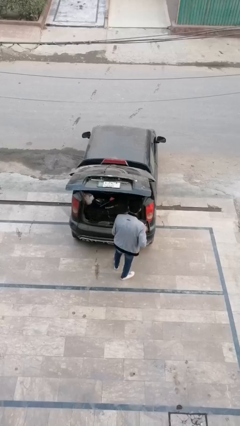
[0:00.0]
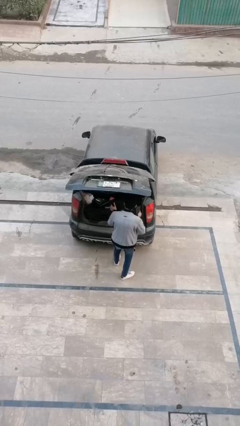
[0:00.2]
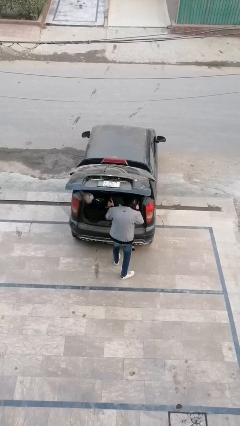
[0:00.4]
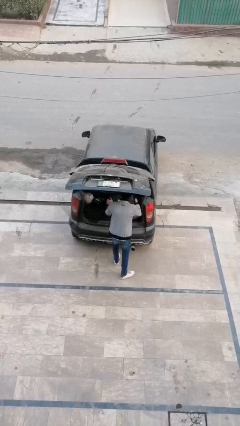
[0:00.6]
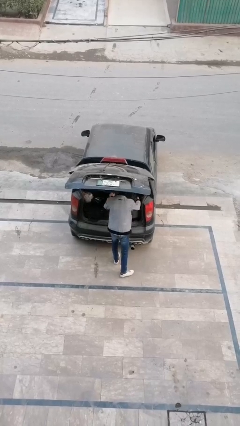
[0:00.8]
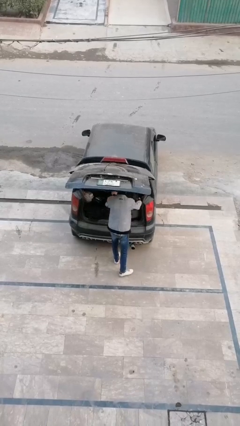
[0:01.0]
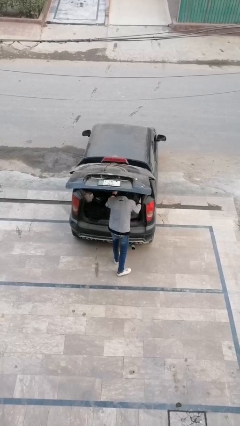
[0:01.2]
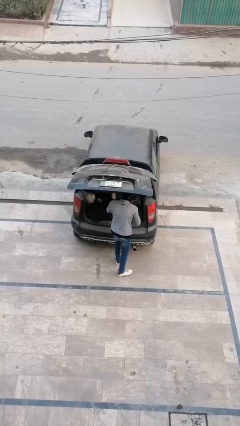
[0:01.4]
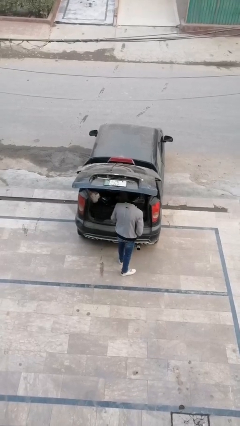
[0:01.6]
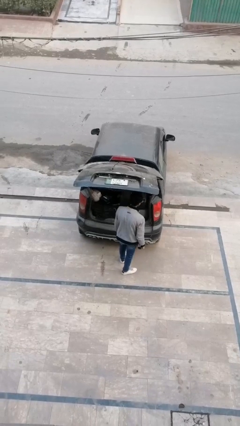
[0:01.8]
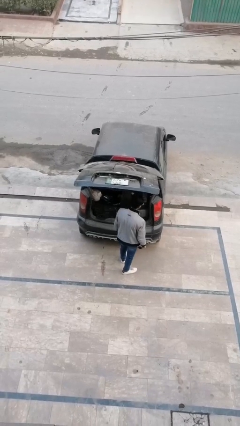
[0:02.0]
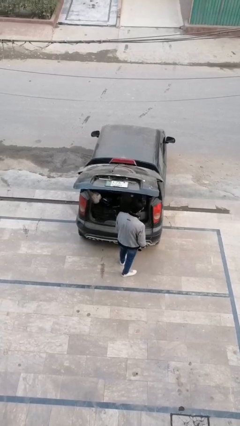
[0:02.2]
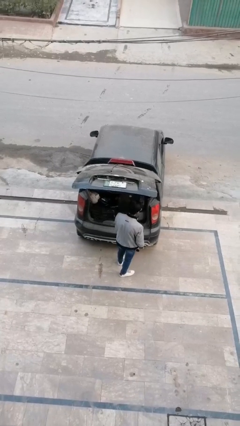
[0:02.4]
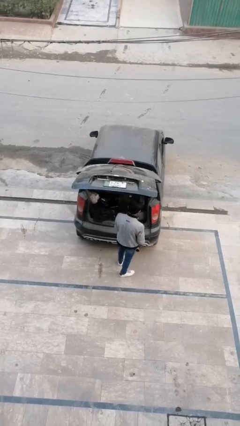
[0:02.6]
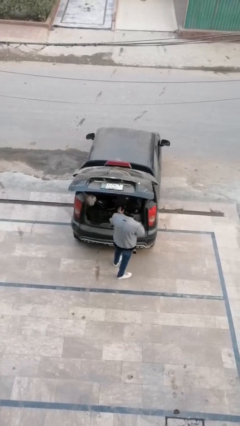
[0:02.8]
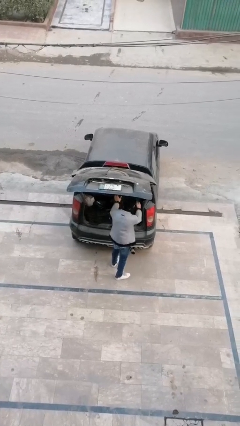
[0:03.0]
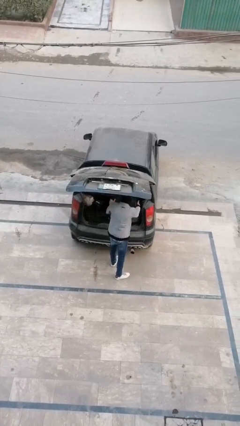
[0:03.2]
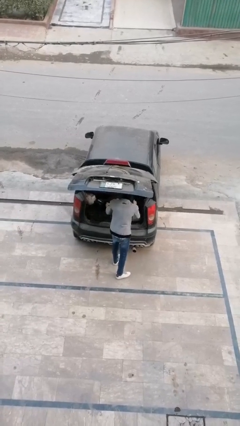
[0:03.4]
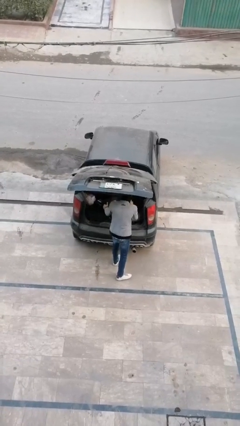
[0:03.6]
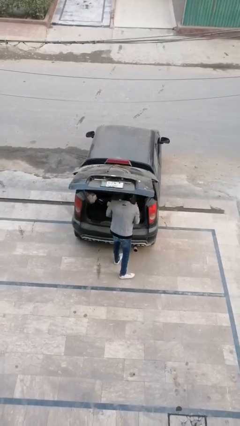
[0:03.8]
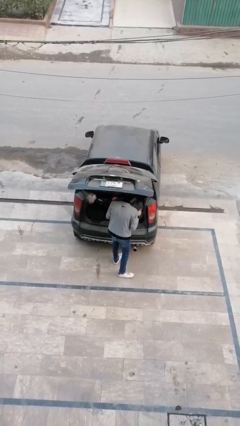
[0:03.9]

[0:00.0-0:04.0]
person loads car

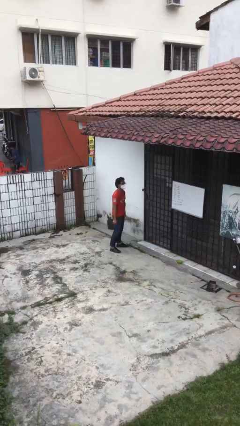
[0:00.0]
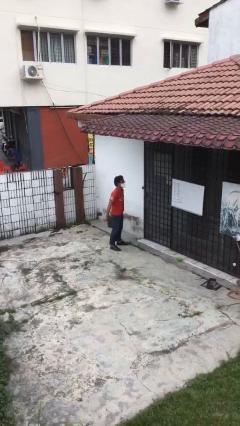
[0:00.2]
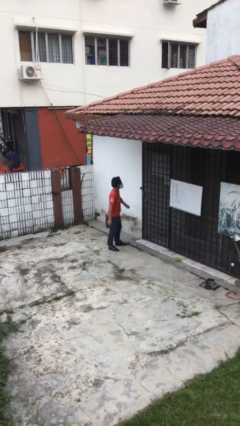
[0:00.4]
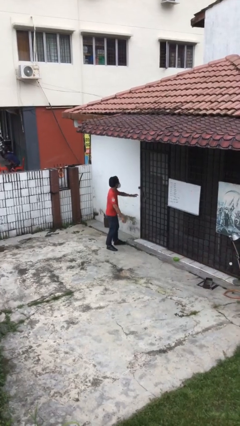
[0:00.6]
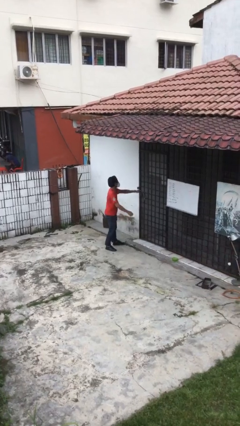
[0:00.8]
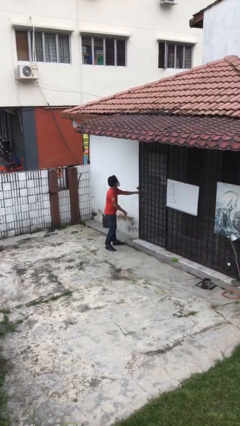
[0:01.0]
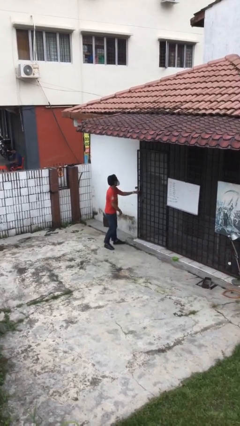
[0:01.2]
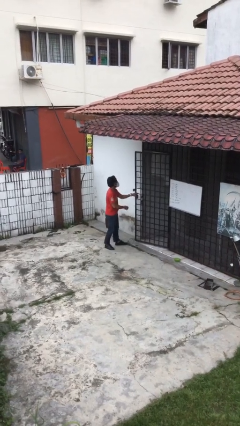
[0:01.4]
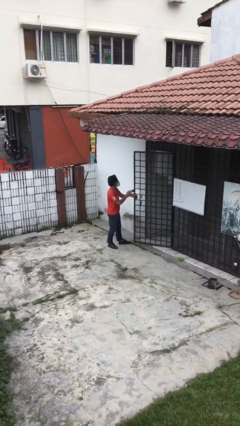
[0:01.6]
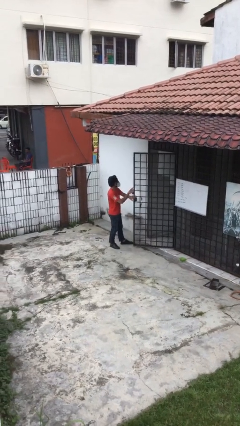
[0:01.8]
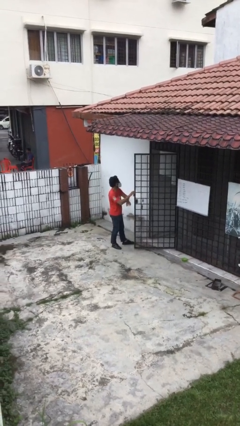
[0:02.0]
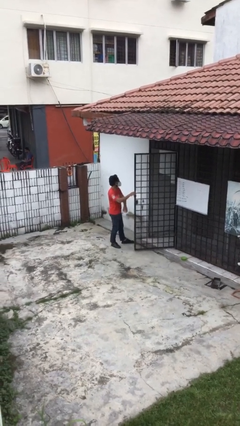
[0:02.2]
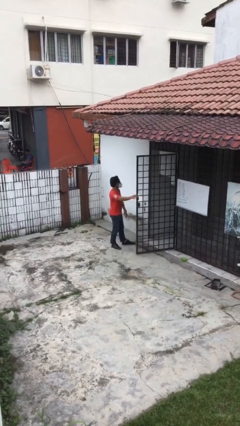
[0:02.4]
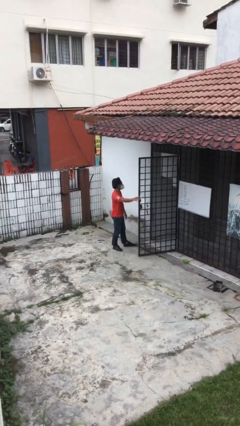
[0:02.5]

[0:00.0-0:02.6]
person opens facility door

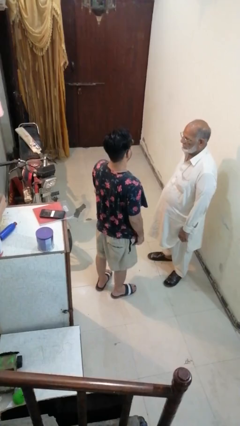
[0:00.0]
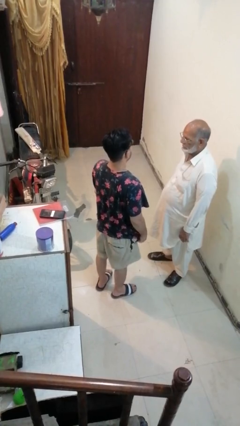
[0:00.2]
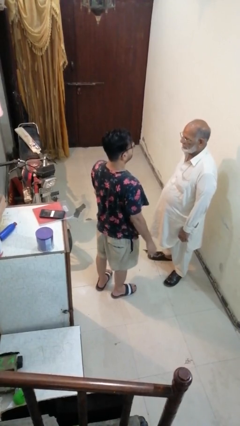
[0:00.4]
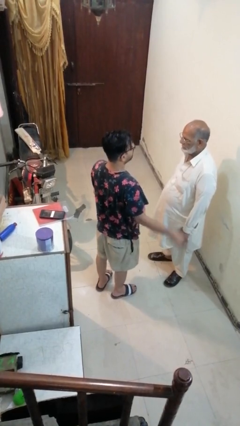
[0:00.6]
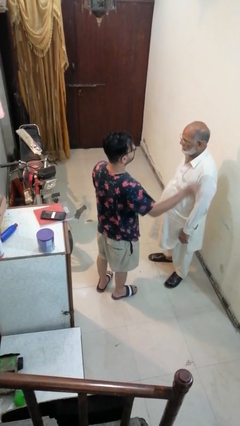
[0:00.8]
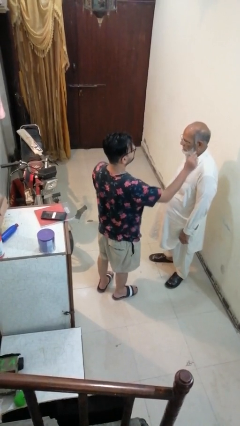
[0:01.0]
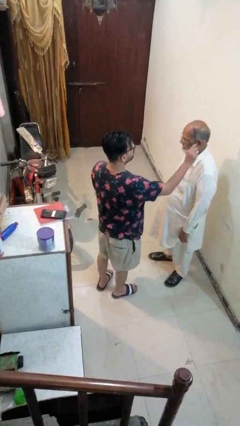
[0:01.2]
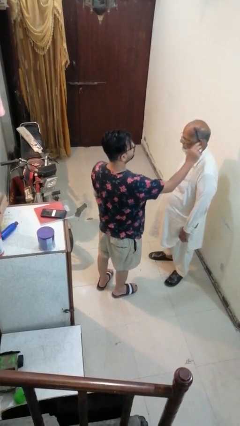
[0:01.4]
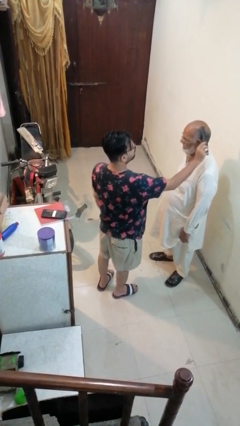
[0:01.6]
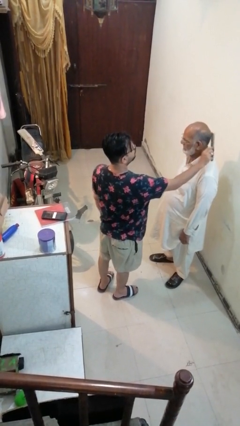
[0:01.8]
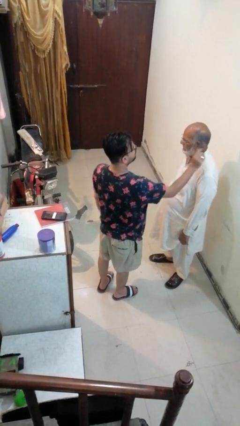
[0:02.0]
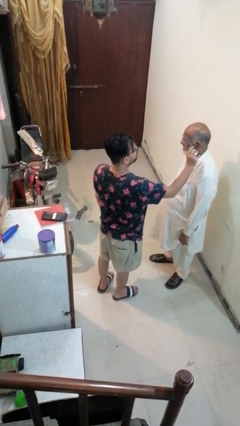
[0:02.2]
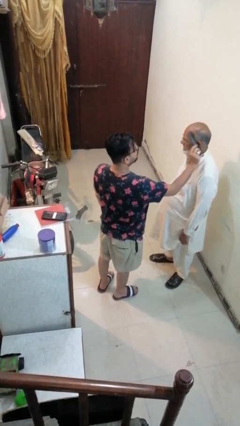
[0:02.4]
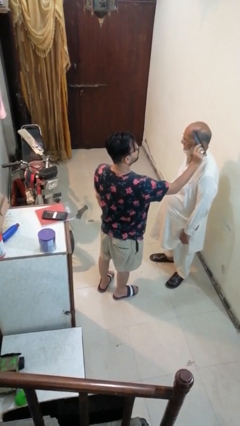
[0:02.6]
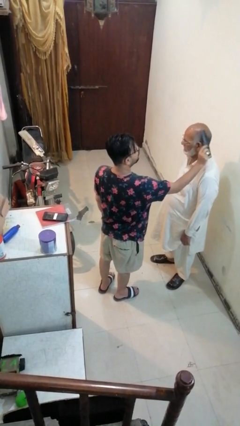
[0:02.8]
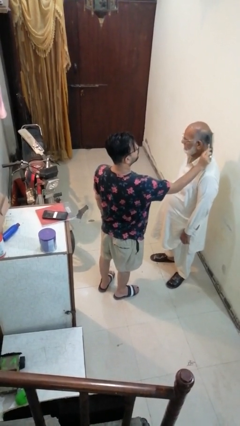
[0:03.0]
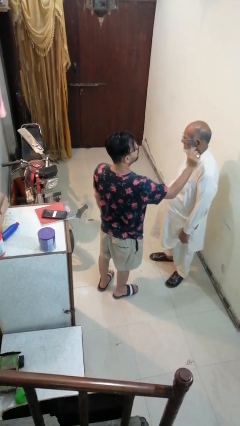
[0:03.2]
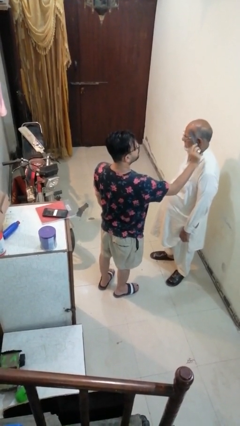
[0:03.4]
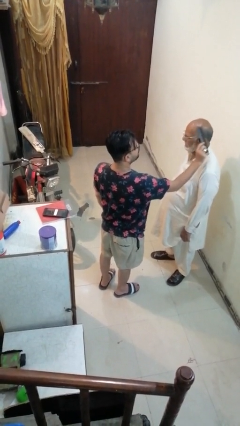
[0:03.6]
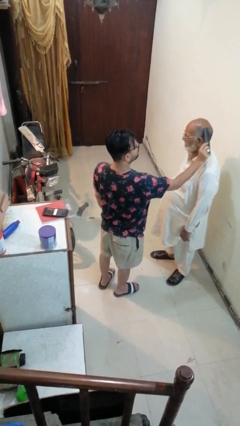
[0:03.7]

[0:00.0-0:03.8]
person brushes hair of person

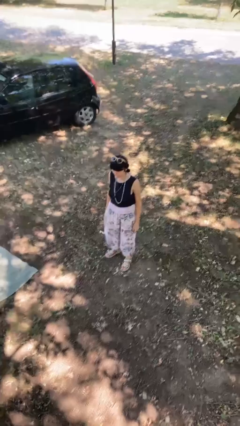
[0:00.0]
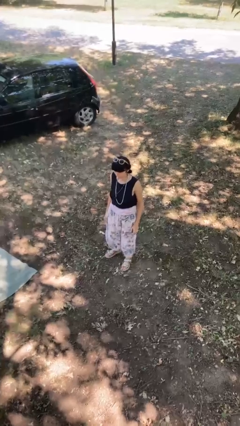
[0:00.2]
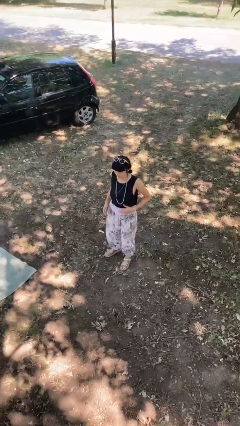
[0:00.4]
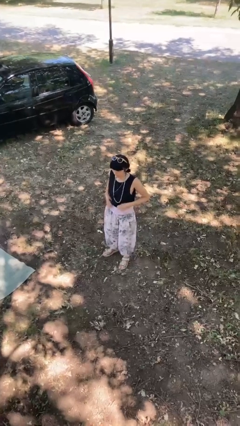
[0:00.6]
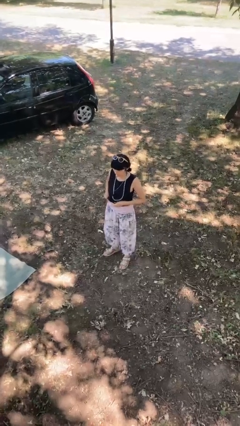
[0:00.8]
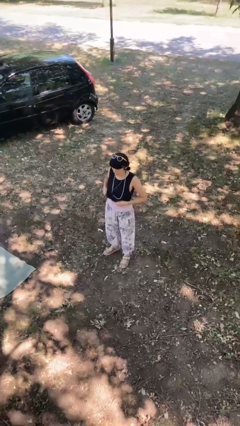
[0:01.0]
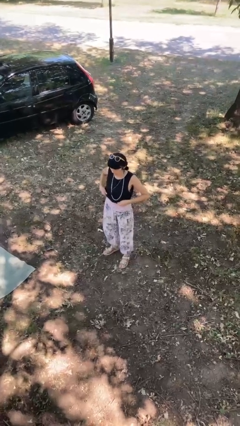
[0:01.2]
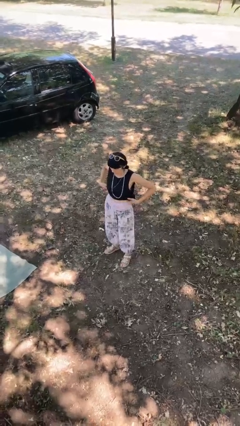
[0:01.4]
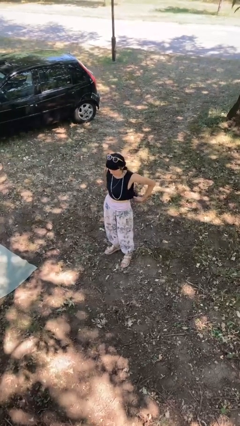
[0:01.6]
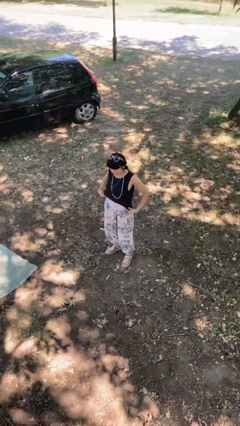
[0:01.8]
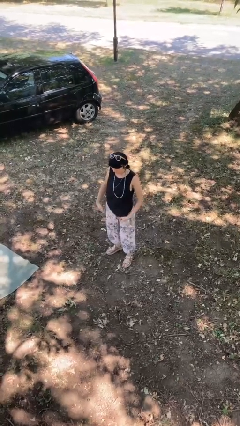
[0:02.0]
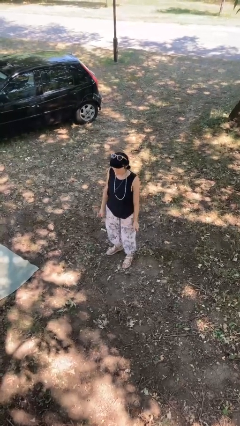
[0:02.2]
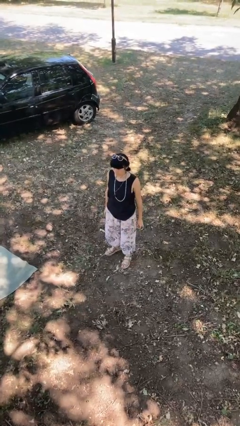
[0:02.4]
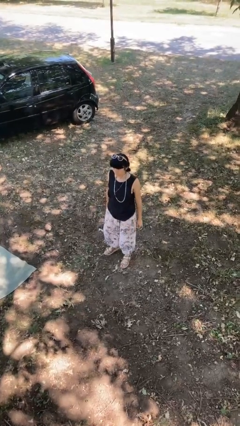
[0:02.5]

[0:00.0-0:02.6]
person untucks shirt

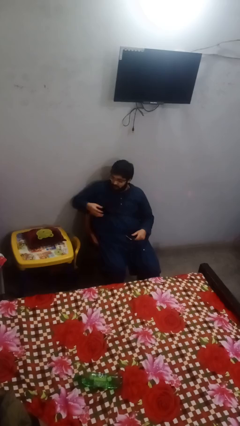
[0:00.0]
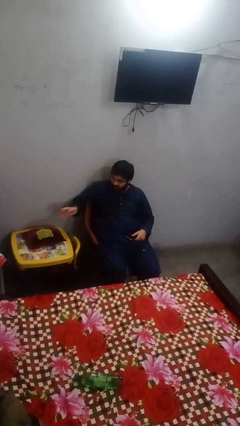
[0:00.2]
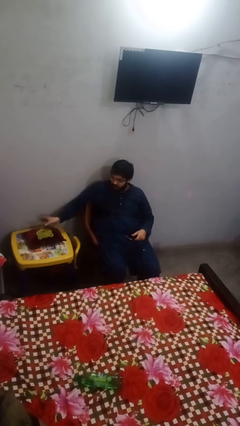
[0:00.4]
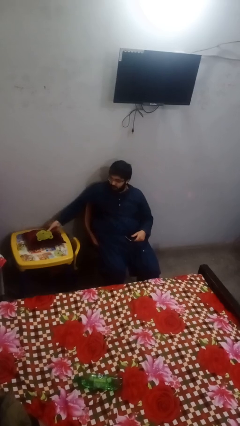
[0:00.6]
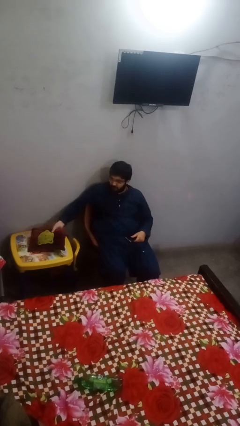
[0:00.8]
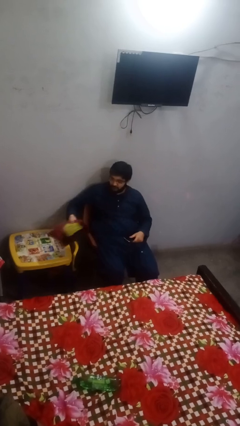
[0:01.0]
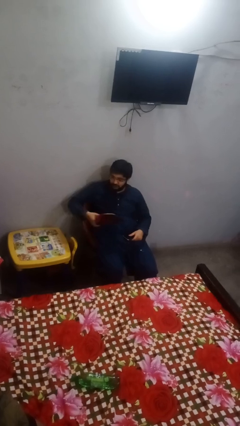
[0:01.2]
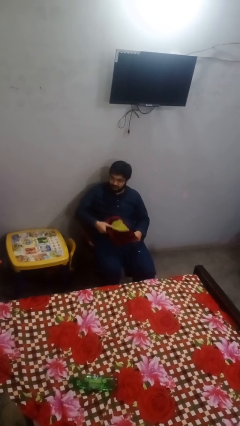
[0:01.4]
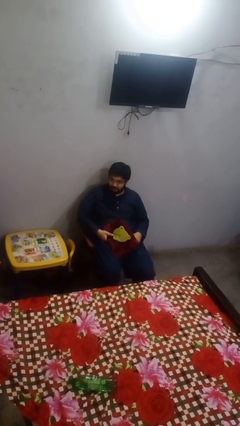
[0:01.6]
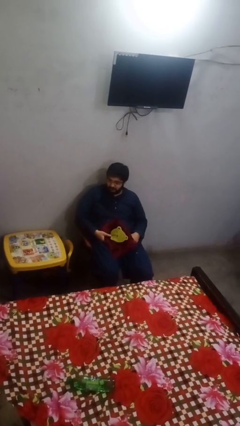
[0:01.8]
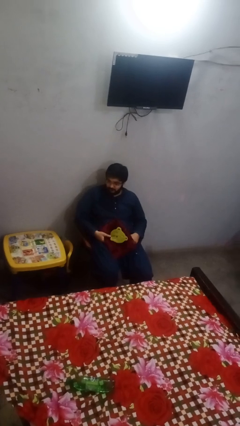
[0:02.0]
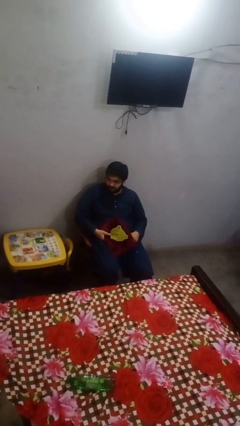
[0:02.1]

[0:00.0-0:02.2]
person picks up object from table

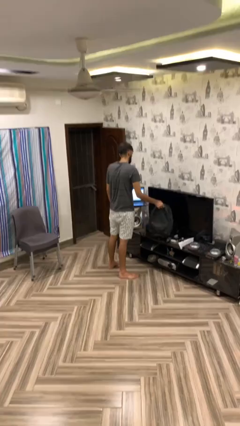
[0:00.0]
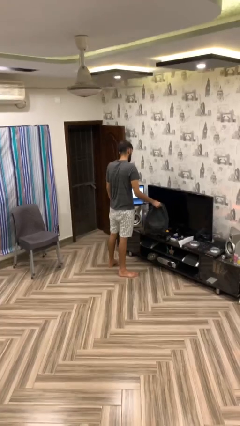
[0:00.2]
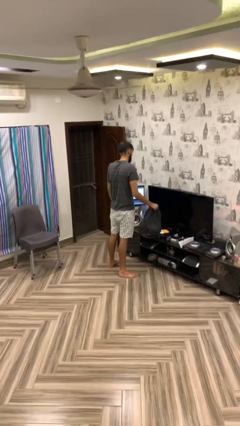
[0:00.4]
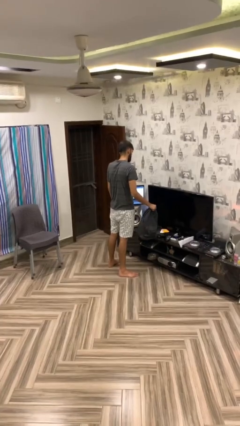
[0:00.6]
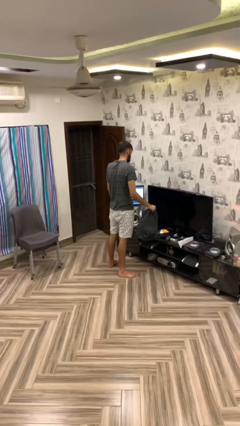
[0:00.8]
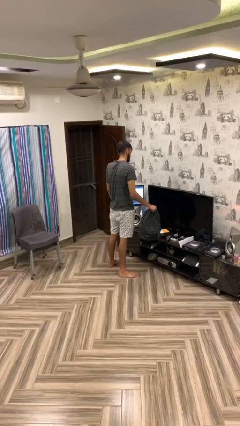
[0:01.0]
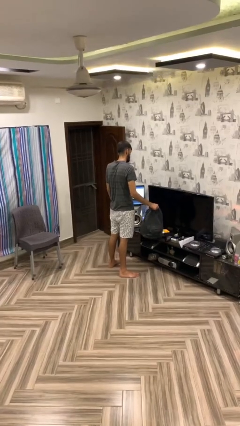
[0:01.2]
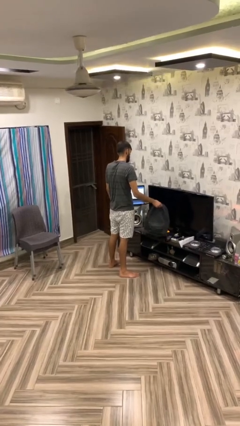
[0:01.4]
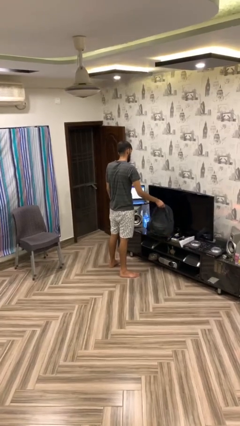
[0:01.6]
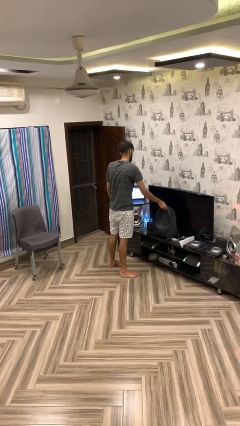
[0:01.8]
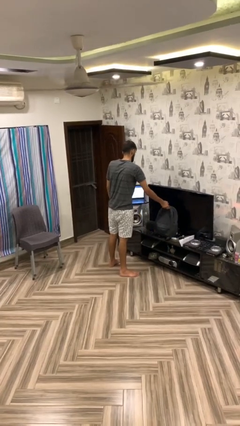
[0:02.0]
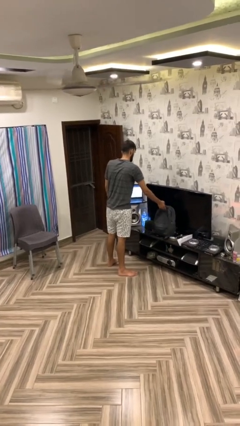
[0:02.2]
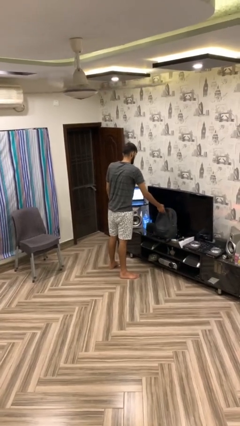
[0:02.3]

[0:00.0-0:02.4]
person puts down object on table
